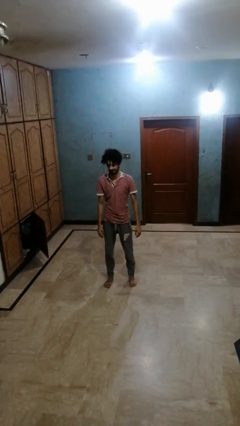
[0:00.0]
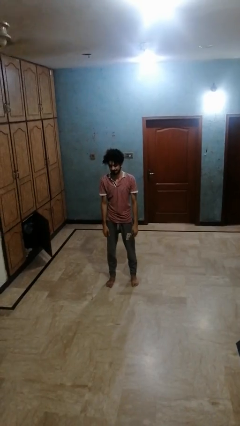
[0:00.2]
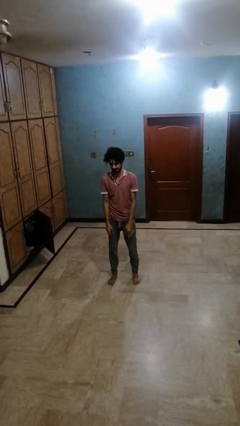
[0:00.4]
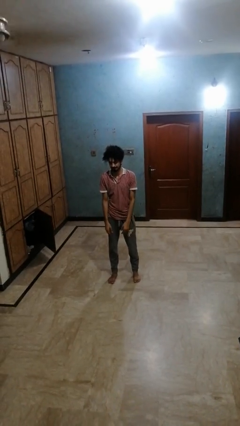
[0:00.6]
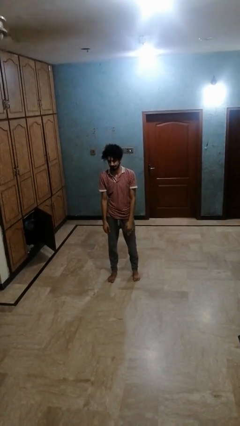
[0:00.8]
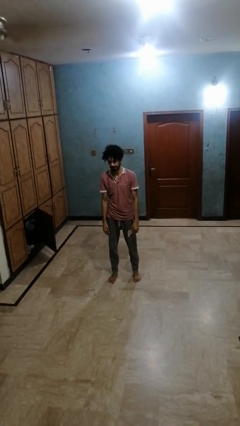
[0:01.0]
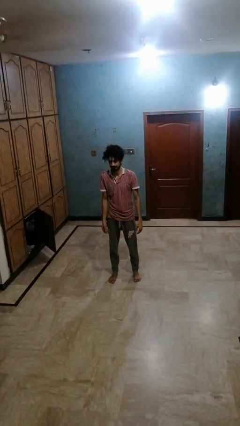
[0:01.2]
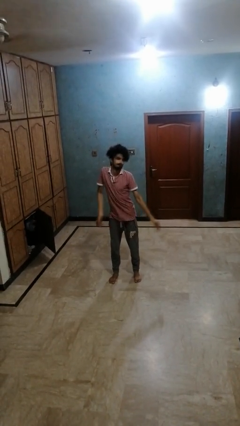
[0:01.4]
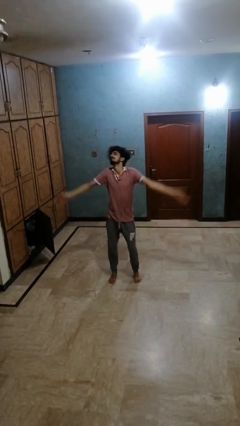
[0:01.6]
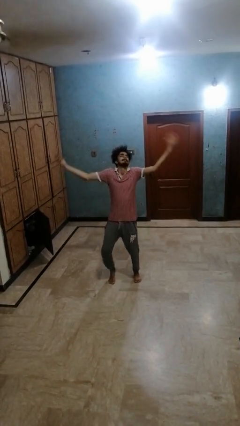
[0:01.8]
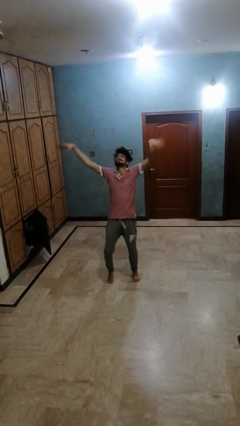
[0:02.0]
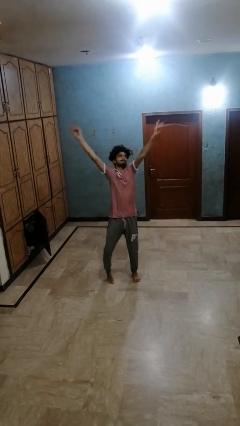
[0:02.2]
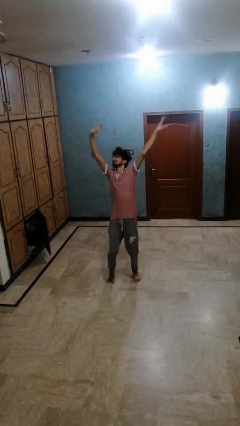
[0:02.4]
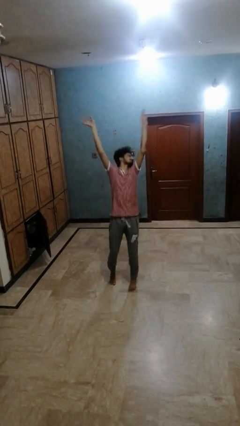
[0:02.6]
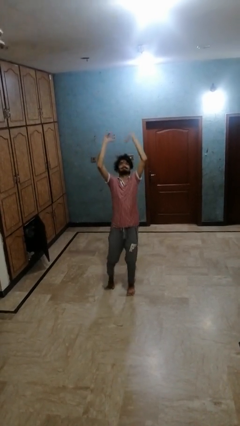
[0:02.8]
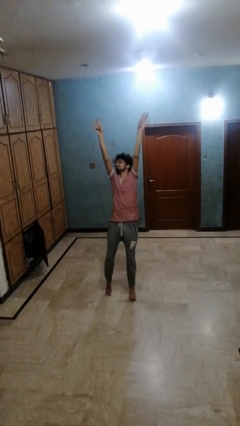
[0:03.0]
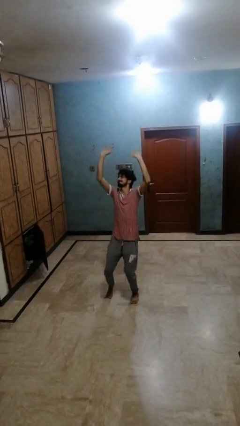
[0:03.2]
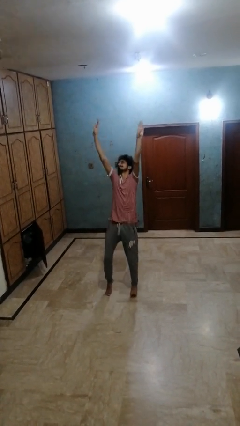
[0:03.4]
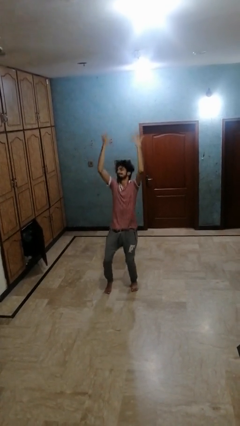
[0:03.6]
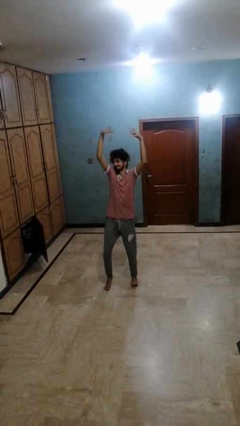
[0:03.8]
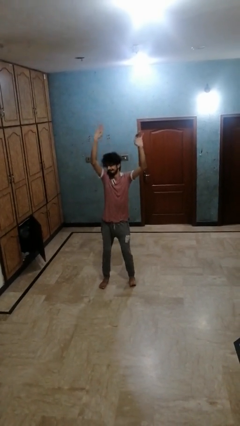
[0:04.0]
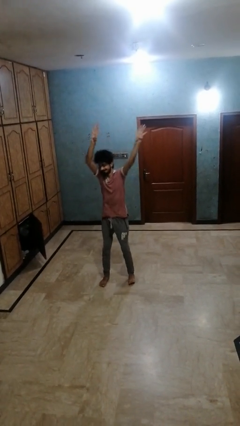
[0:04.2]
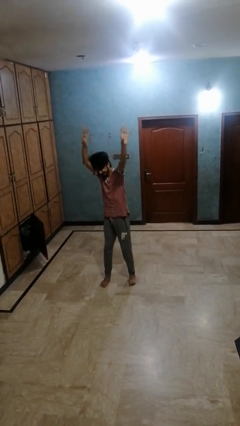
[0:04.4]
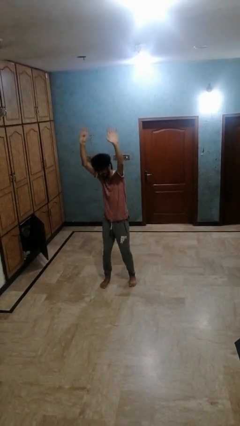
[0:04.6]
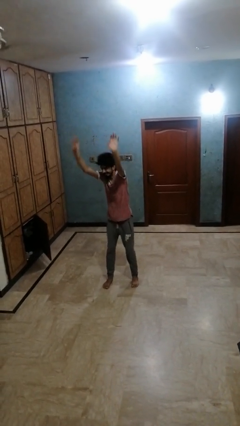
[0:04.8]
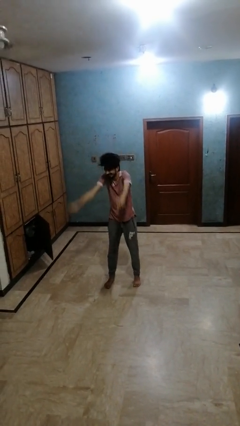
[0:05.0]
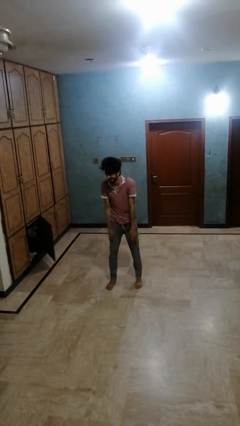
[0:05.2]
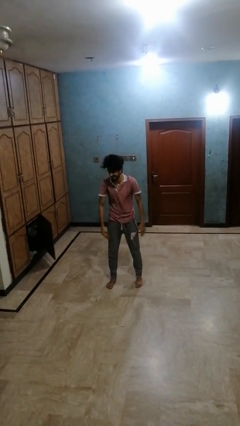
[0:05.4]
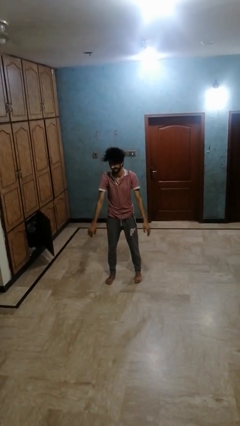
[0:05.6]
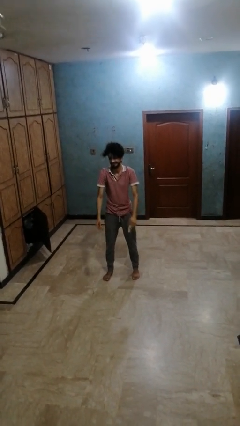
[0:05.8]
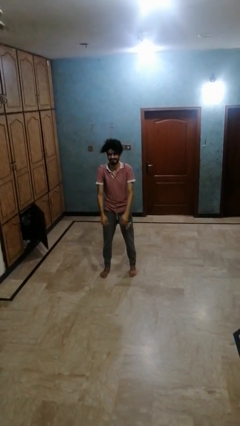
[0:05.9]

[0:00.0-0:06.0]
person dances in place

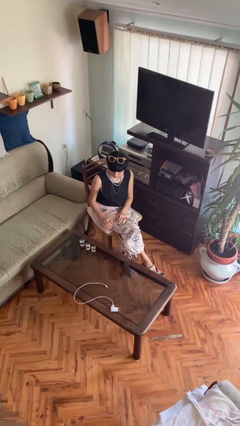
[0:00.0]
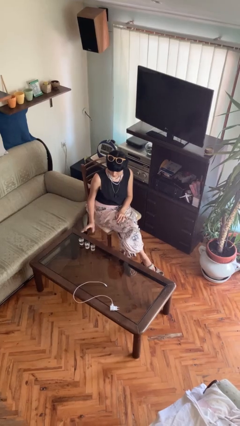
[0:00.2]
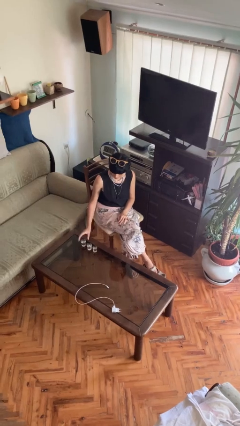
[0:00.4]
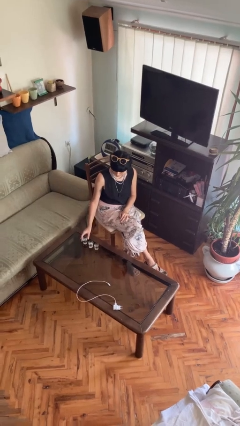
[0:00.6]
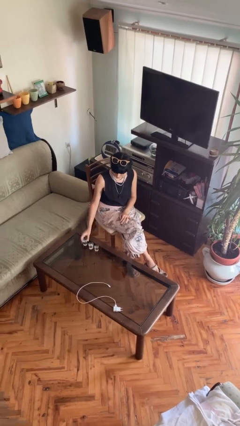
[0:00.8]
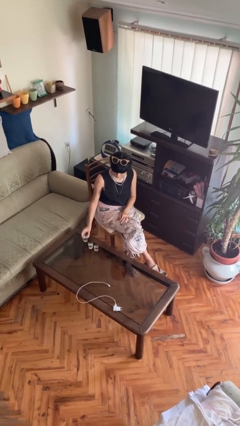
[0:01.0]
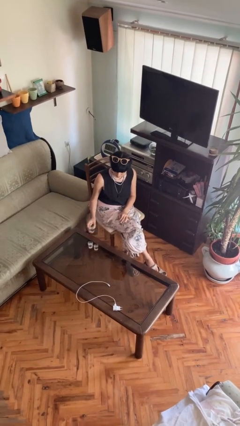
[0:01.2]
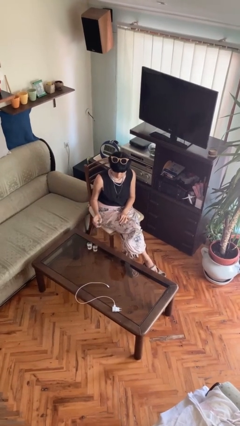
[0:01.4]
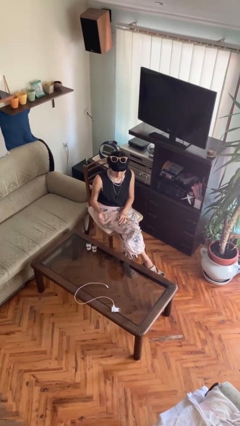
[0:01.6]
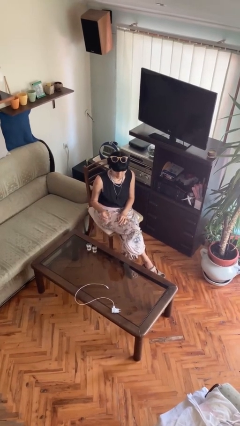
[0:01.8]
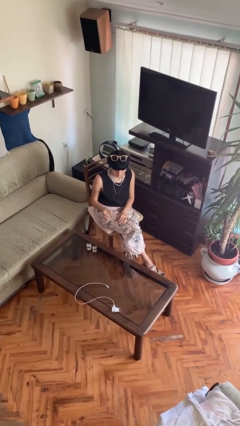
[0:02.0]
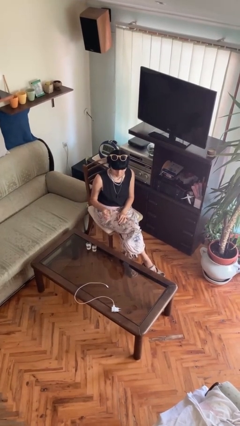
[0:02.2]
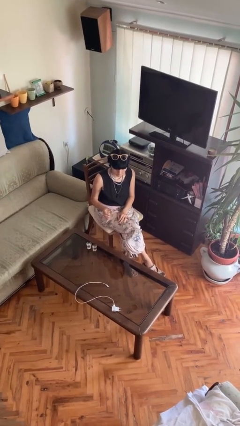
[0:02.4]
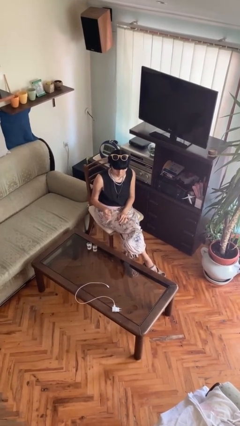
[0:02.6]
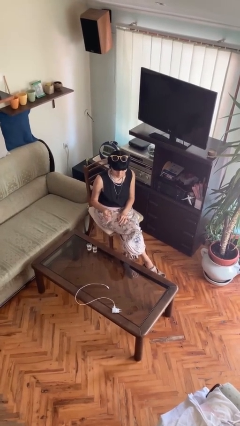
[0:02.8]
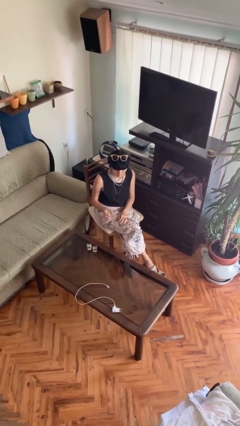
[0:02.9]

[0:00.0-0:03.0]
person picks up object from table

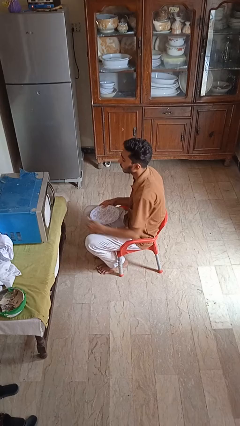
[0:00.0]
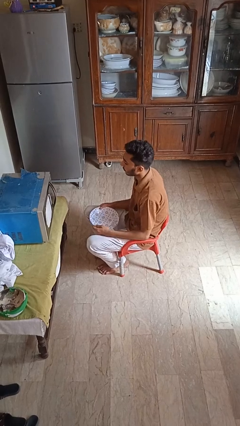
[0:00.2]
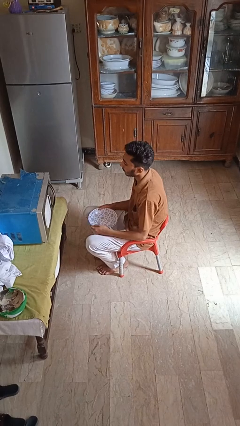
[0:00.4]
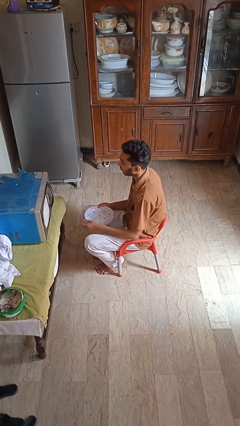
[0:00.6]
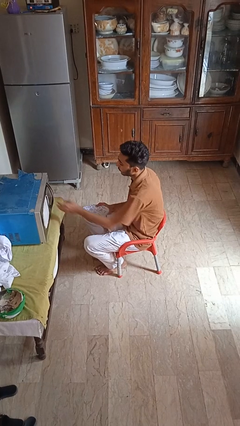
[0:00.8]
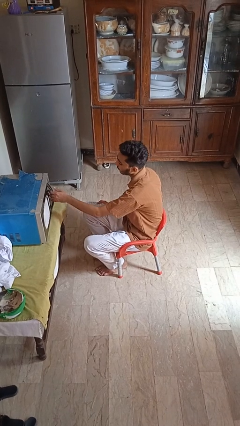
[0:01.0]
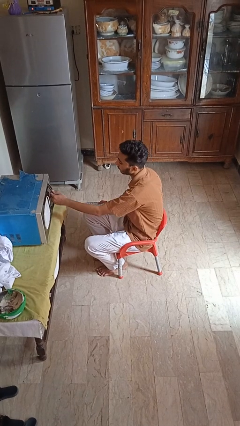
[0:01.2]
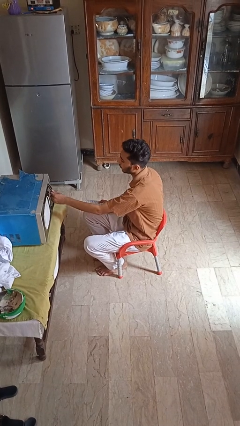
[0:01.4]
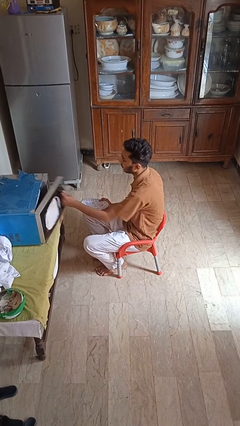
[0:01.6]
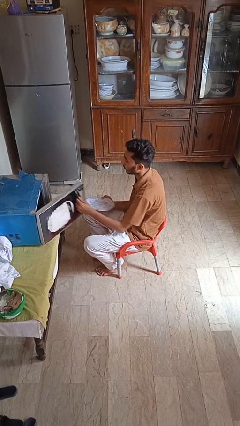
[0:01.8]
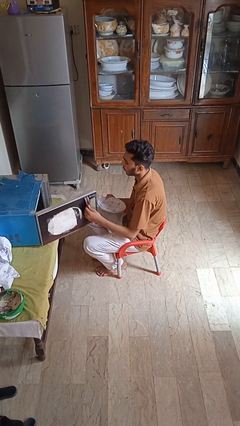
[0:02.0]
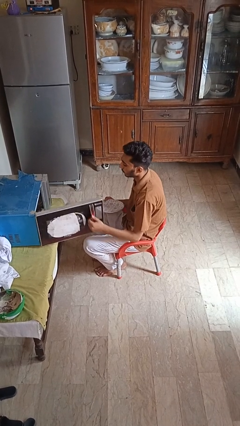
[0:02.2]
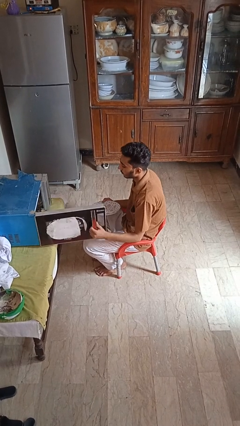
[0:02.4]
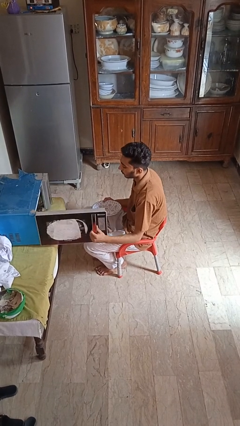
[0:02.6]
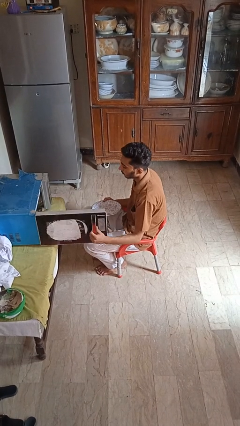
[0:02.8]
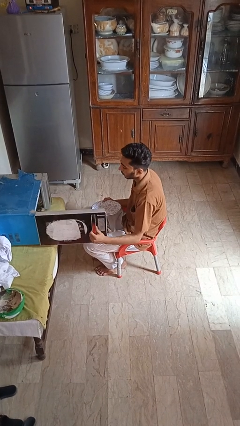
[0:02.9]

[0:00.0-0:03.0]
person opens microwave

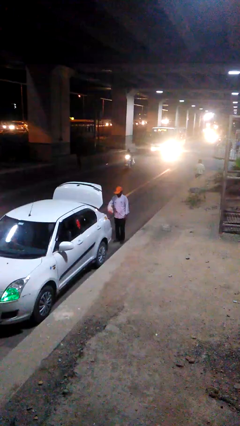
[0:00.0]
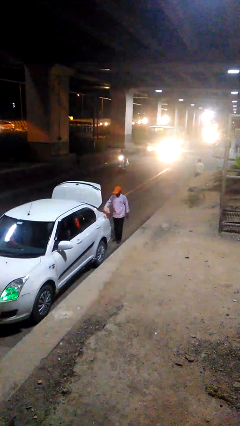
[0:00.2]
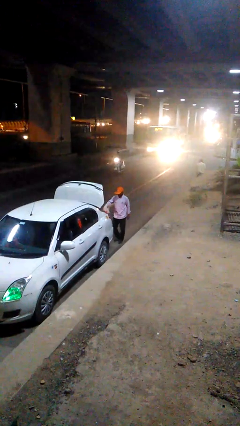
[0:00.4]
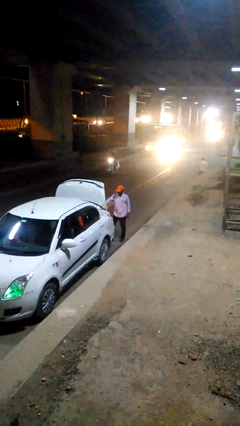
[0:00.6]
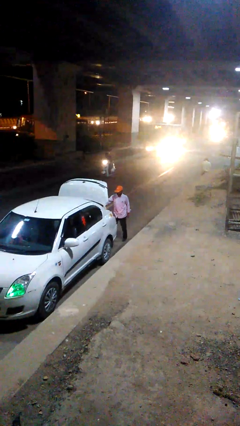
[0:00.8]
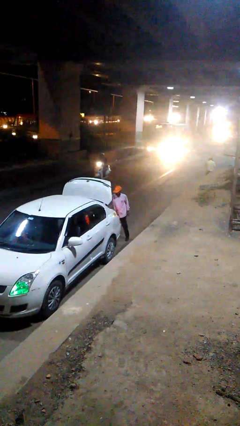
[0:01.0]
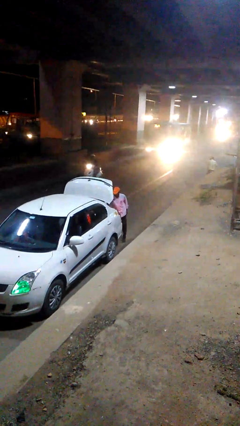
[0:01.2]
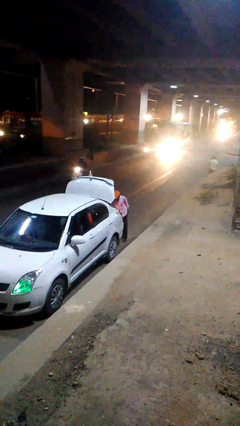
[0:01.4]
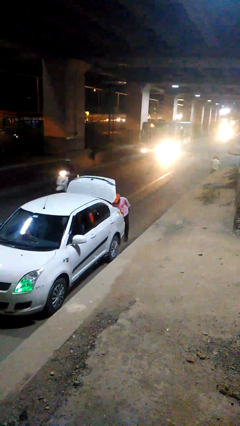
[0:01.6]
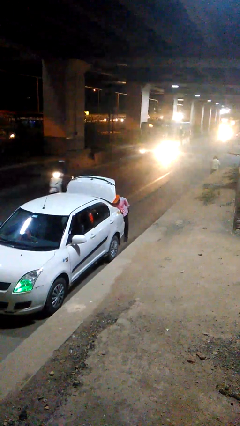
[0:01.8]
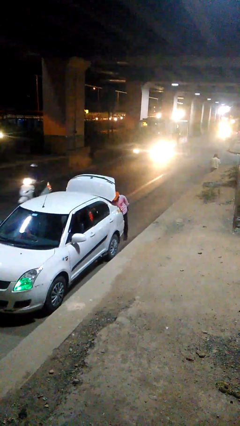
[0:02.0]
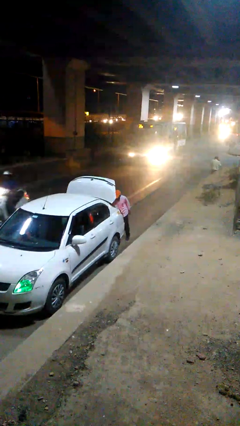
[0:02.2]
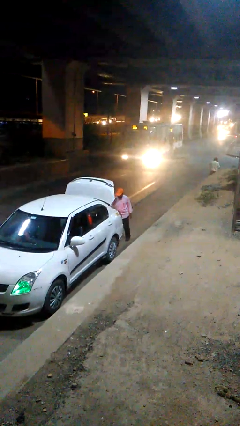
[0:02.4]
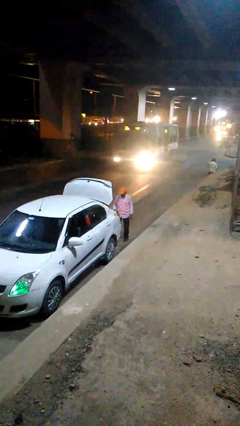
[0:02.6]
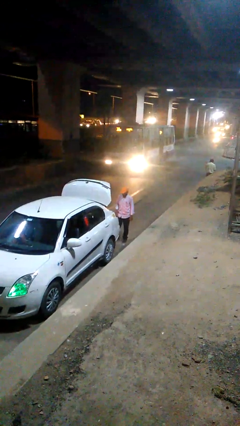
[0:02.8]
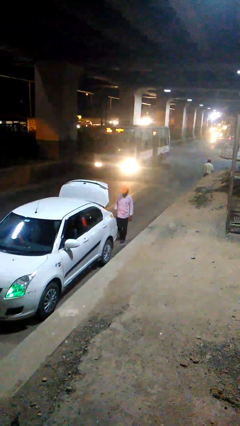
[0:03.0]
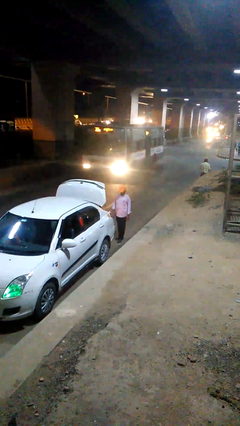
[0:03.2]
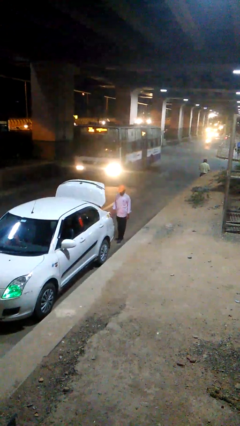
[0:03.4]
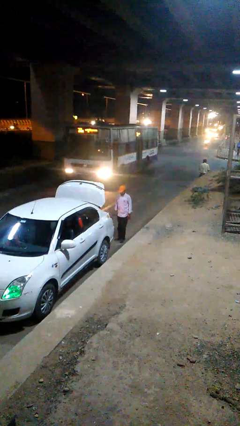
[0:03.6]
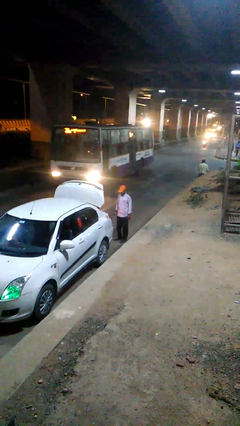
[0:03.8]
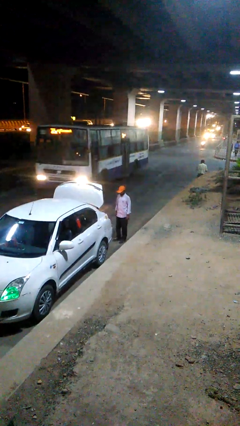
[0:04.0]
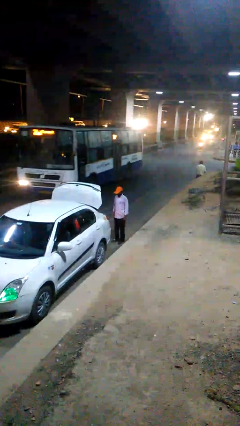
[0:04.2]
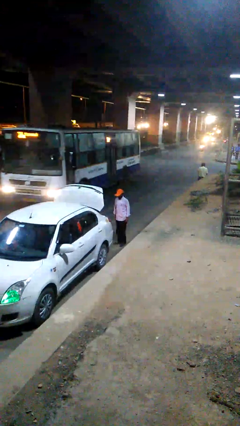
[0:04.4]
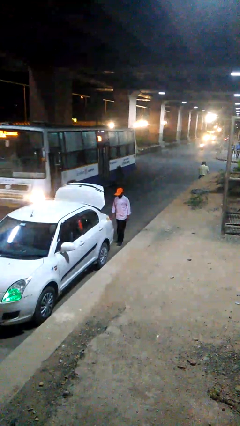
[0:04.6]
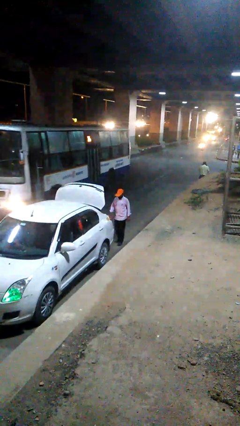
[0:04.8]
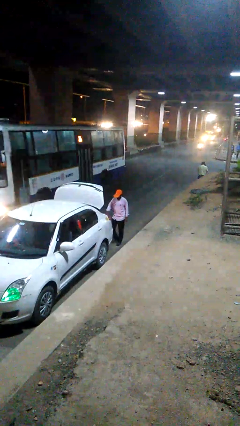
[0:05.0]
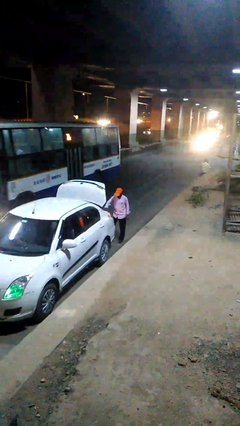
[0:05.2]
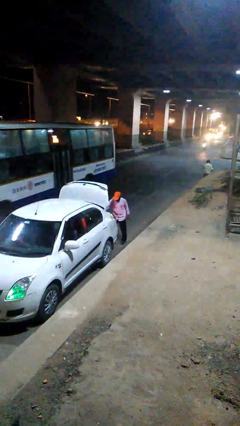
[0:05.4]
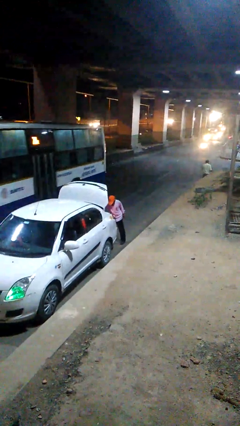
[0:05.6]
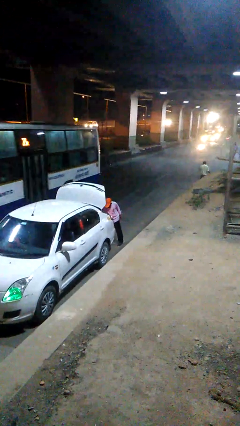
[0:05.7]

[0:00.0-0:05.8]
person loads car

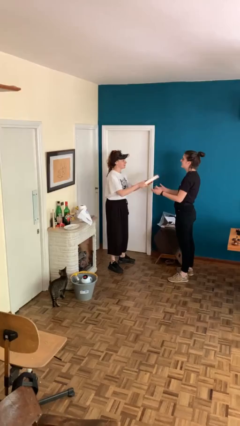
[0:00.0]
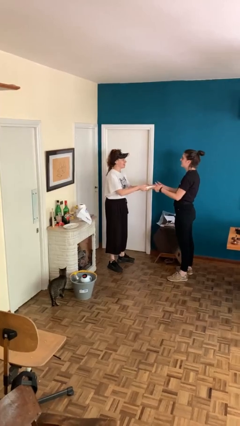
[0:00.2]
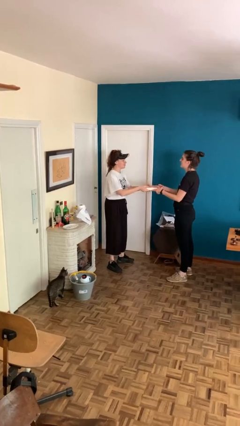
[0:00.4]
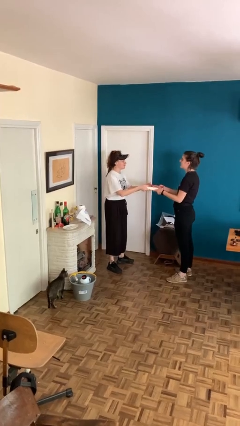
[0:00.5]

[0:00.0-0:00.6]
person transfers object to person
